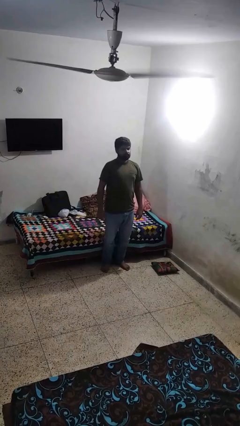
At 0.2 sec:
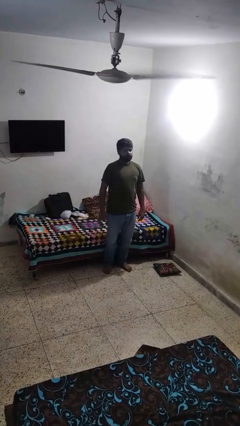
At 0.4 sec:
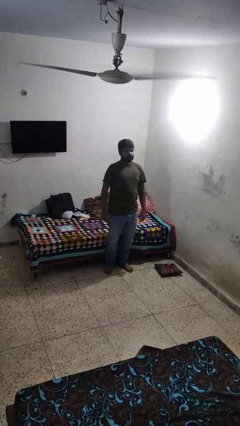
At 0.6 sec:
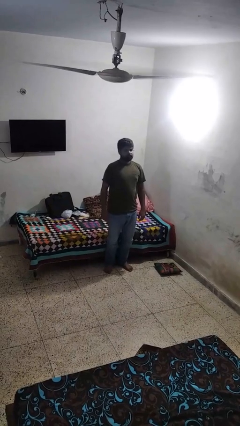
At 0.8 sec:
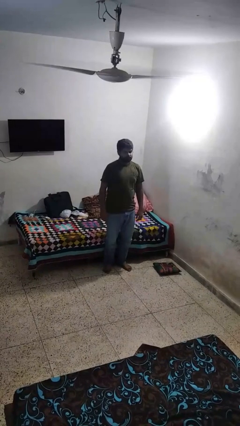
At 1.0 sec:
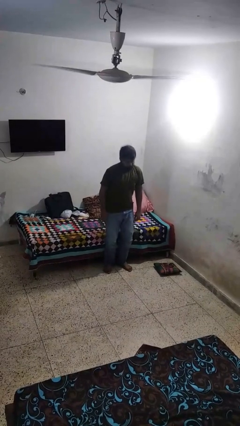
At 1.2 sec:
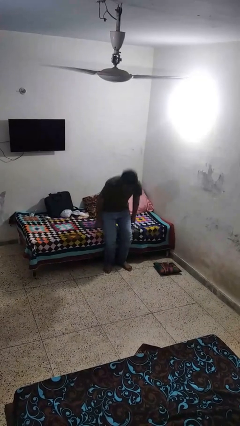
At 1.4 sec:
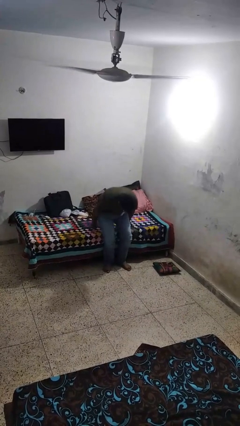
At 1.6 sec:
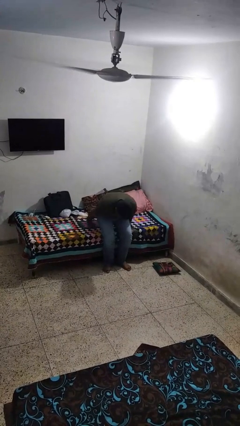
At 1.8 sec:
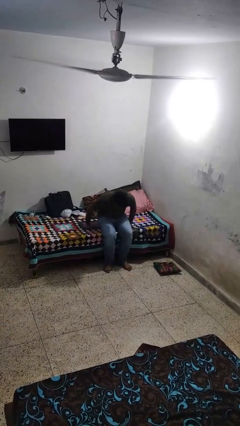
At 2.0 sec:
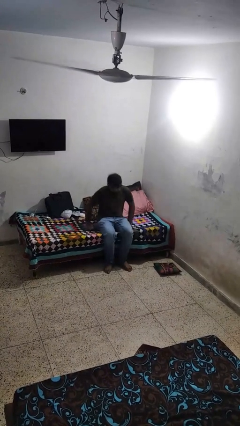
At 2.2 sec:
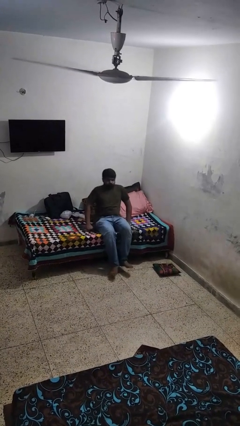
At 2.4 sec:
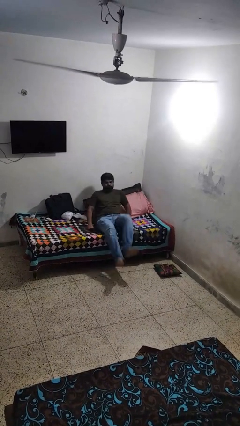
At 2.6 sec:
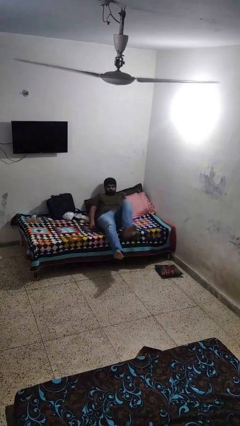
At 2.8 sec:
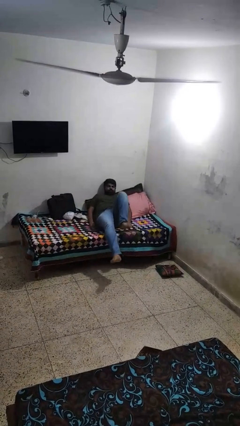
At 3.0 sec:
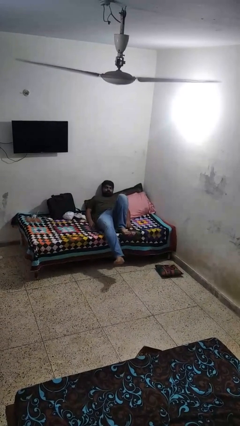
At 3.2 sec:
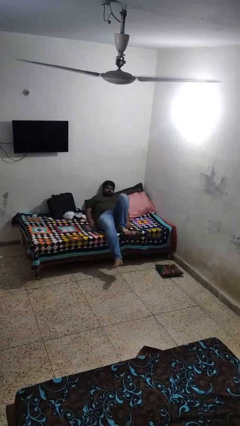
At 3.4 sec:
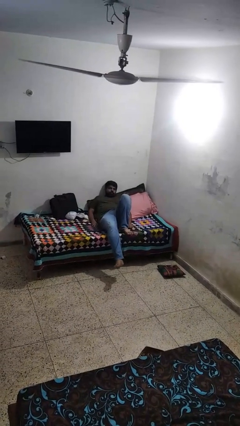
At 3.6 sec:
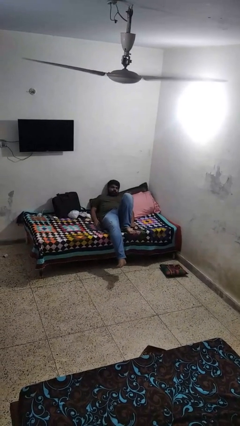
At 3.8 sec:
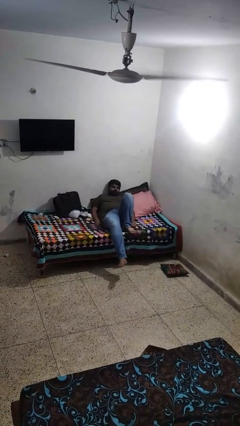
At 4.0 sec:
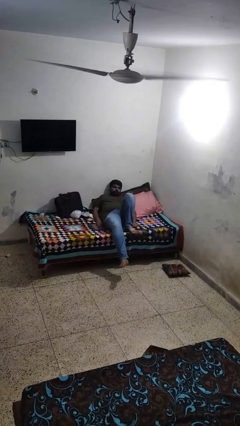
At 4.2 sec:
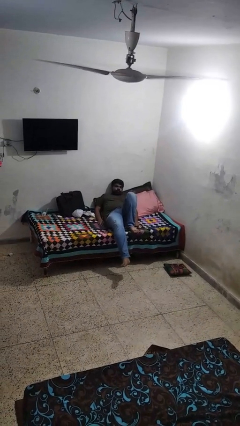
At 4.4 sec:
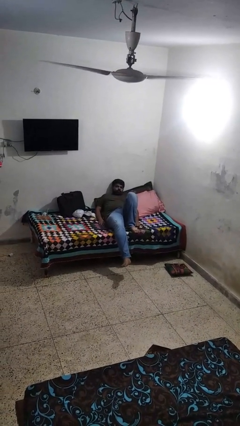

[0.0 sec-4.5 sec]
person lies down on bed

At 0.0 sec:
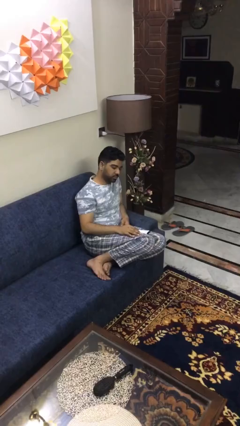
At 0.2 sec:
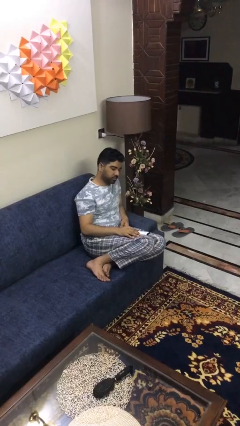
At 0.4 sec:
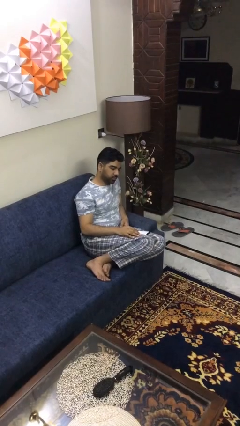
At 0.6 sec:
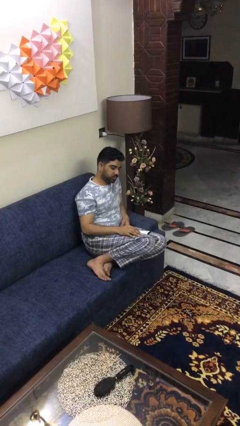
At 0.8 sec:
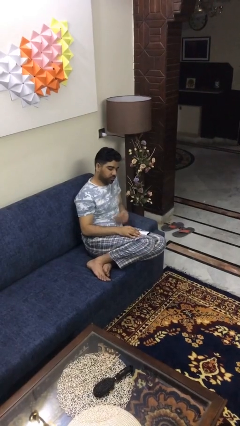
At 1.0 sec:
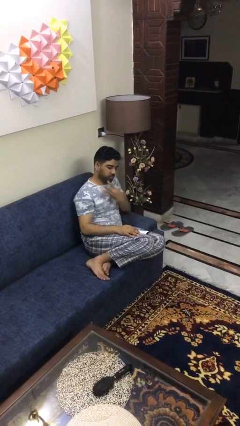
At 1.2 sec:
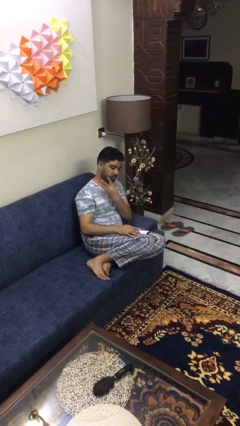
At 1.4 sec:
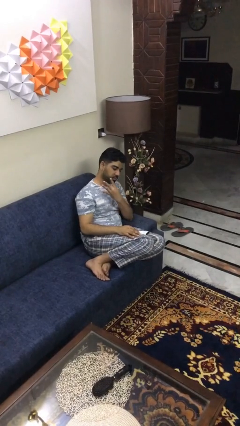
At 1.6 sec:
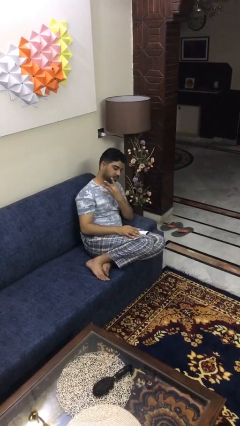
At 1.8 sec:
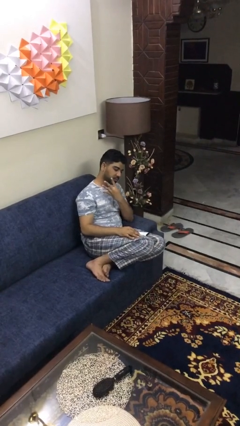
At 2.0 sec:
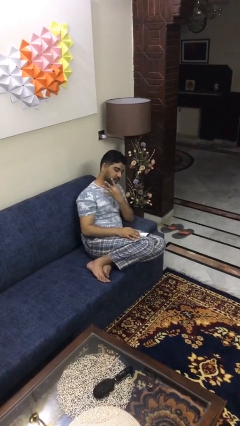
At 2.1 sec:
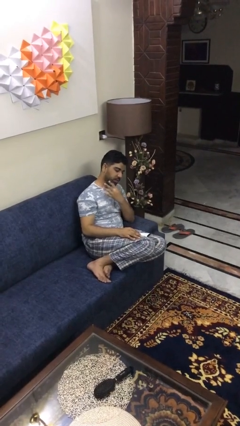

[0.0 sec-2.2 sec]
person gestures number four

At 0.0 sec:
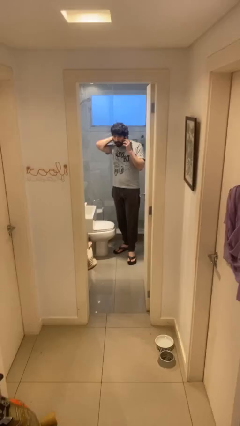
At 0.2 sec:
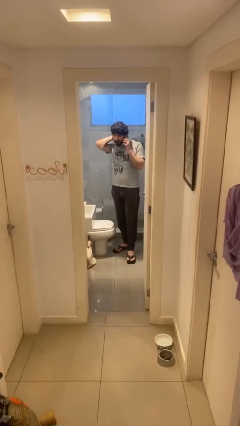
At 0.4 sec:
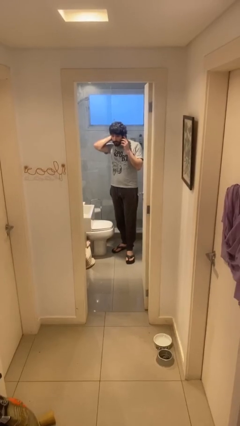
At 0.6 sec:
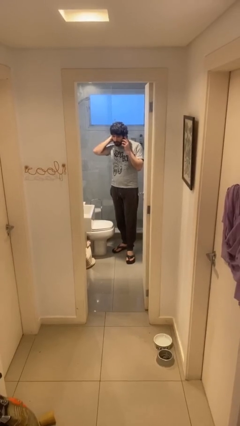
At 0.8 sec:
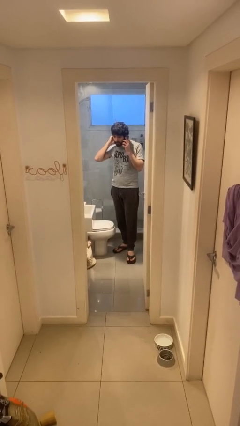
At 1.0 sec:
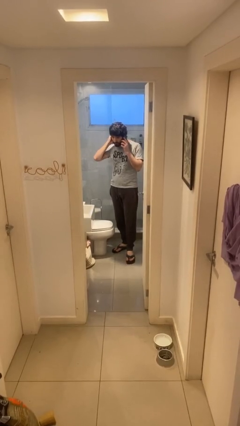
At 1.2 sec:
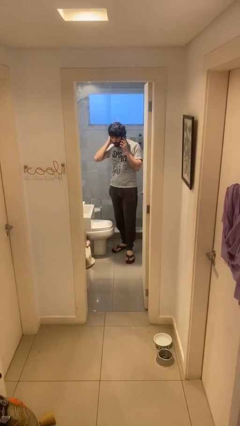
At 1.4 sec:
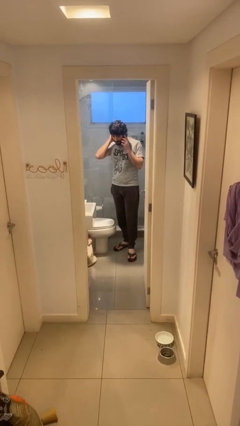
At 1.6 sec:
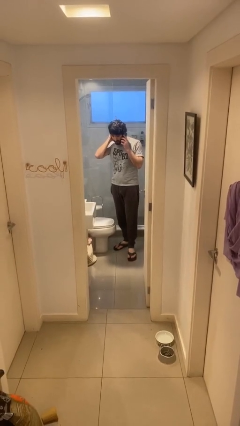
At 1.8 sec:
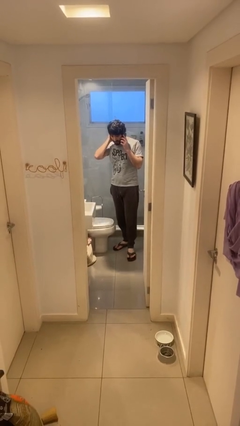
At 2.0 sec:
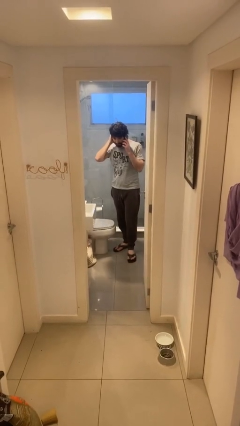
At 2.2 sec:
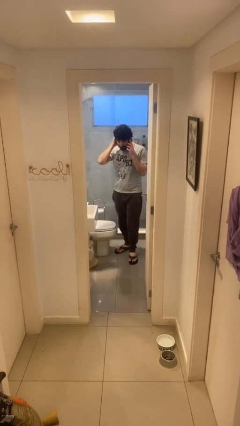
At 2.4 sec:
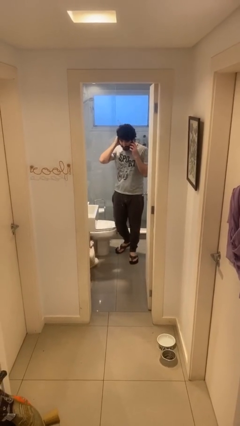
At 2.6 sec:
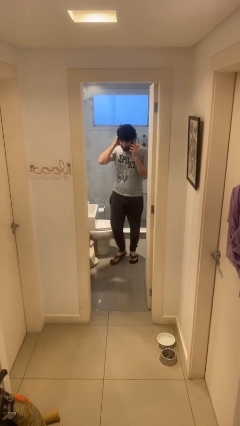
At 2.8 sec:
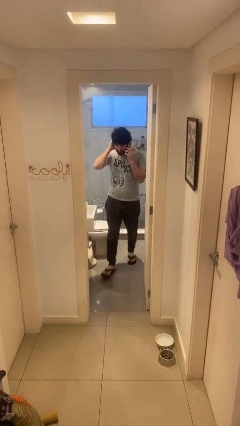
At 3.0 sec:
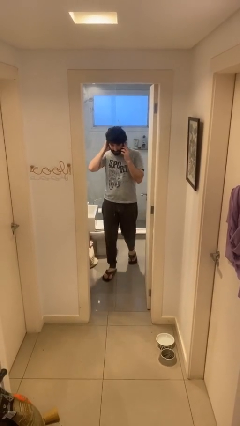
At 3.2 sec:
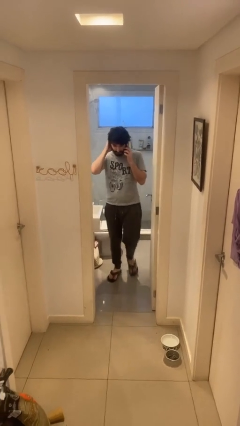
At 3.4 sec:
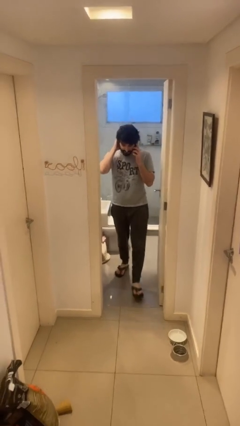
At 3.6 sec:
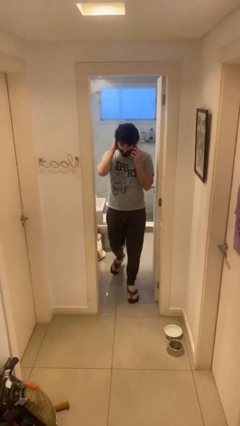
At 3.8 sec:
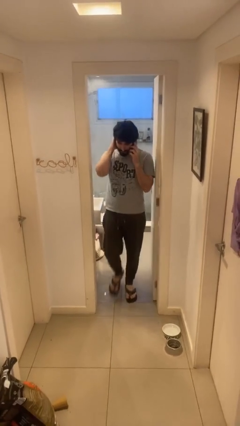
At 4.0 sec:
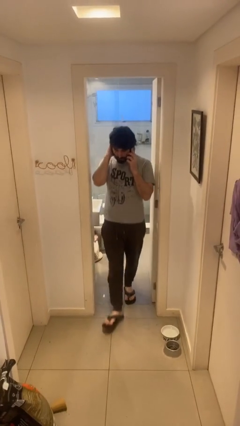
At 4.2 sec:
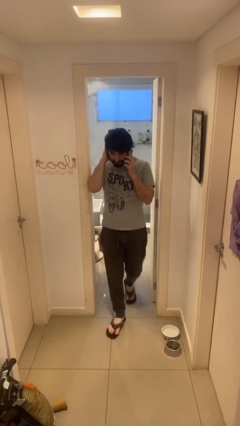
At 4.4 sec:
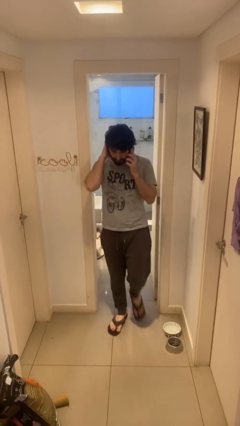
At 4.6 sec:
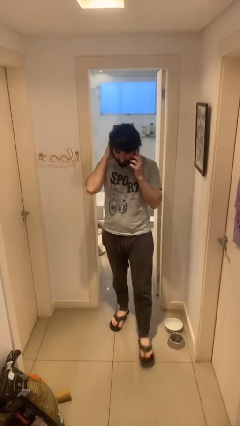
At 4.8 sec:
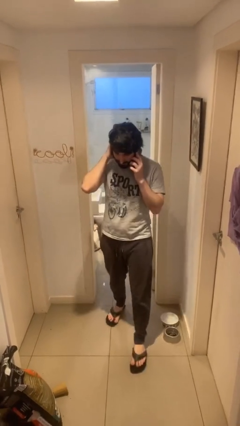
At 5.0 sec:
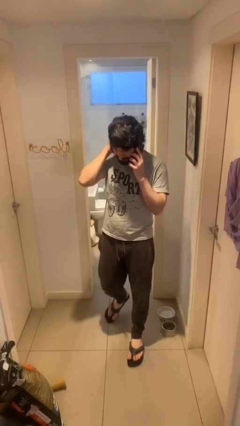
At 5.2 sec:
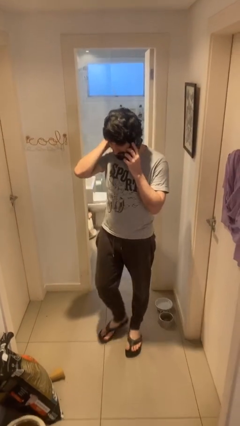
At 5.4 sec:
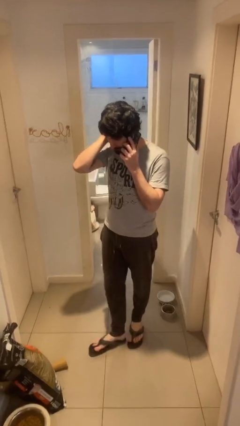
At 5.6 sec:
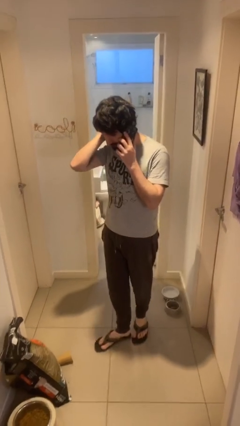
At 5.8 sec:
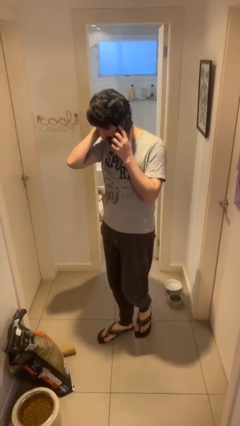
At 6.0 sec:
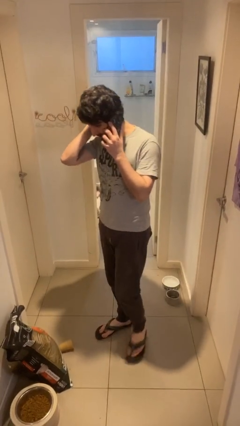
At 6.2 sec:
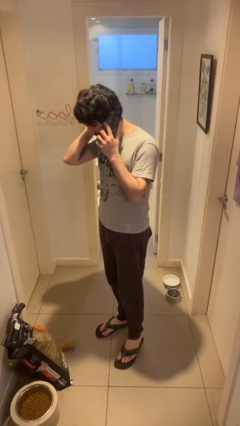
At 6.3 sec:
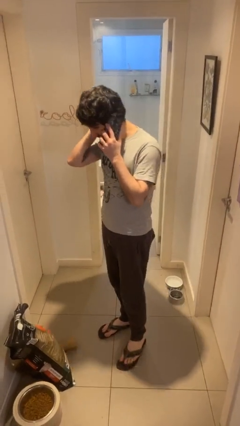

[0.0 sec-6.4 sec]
person enters scene through structure

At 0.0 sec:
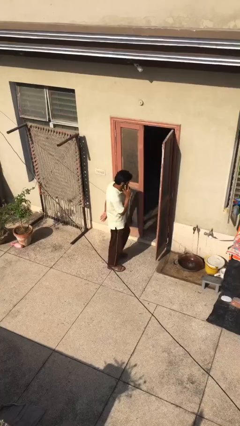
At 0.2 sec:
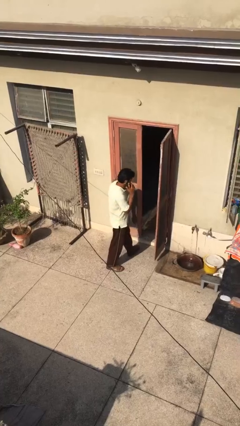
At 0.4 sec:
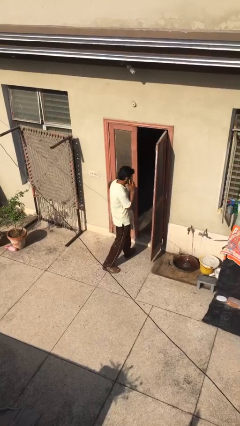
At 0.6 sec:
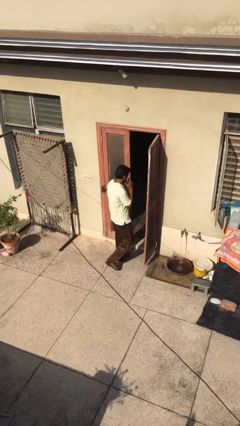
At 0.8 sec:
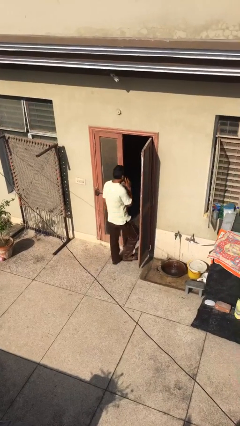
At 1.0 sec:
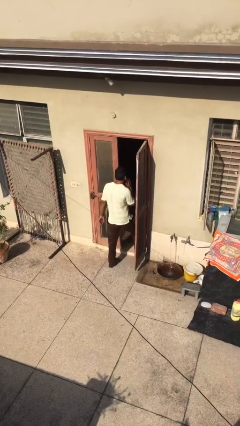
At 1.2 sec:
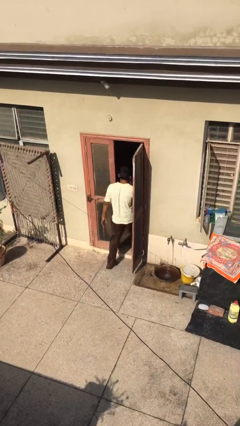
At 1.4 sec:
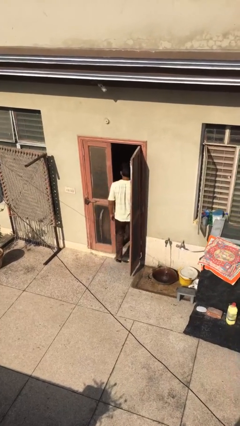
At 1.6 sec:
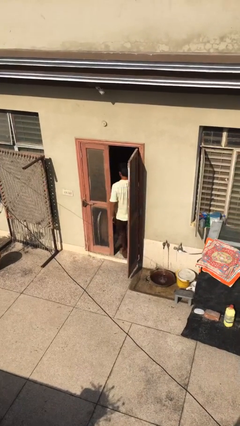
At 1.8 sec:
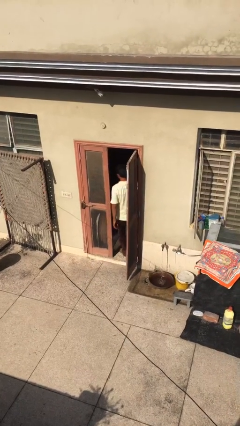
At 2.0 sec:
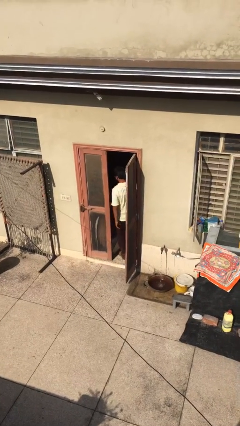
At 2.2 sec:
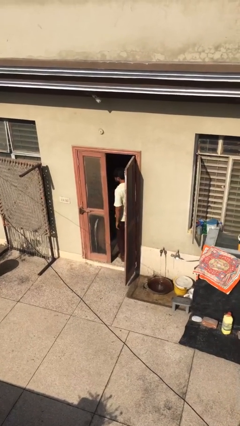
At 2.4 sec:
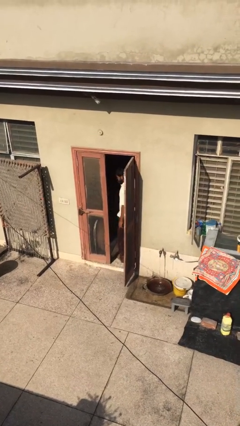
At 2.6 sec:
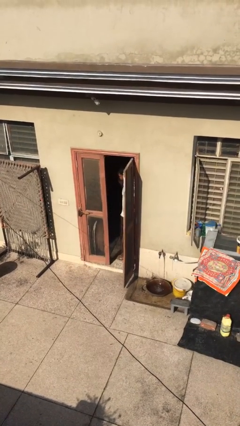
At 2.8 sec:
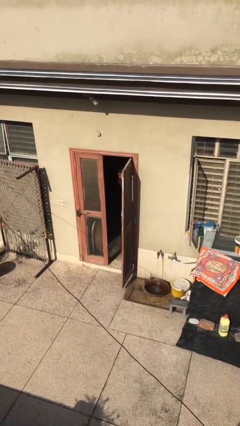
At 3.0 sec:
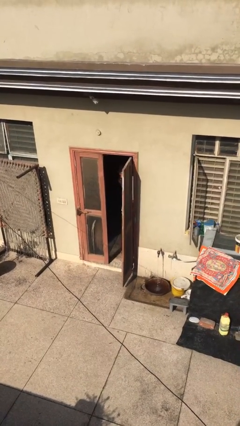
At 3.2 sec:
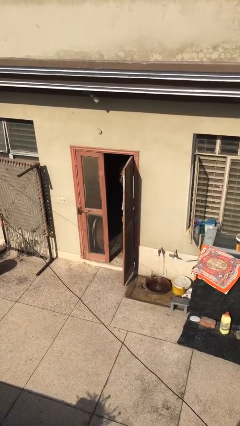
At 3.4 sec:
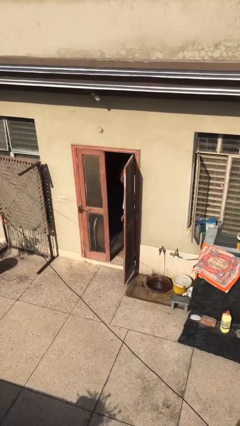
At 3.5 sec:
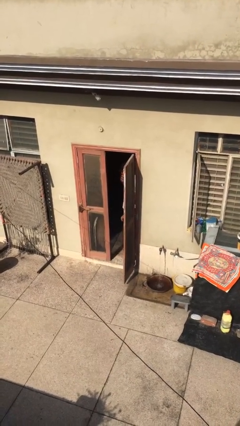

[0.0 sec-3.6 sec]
person exits scene through structure

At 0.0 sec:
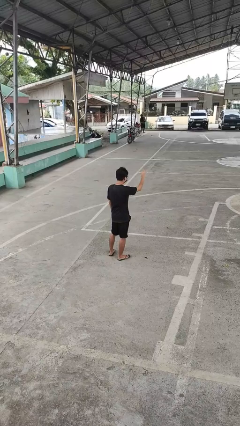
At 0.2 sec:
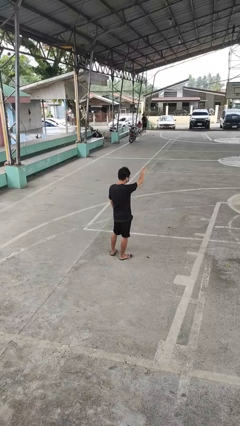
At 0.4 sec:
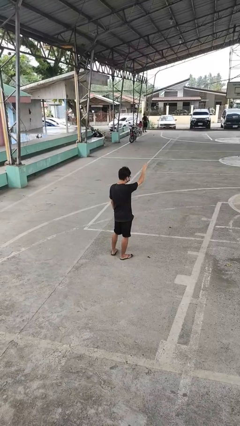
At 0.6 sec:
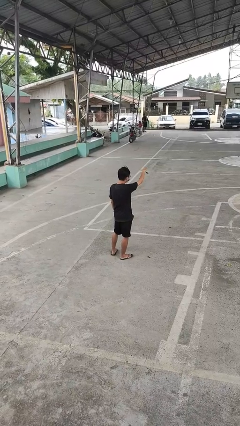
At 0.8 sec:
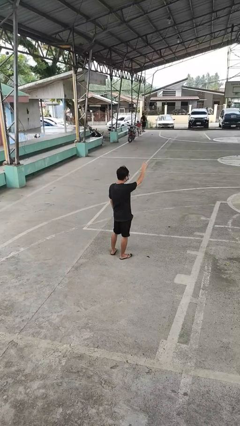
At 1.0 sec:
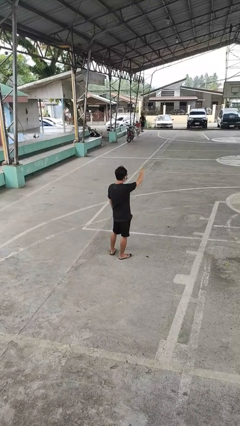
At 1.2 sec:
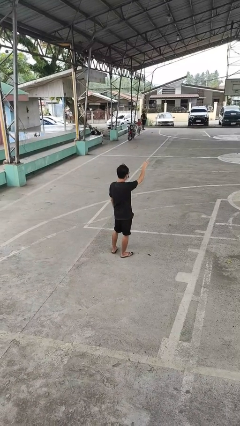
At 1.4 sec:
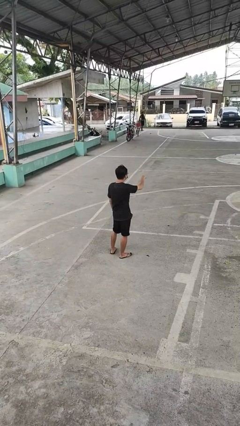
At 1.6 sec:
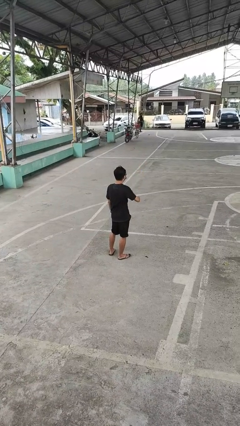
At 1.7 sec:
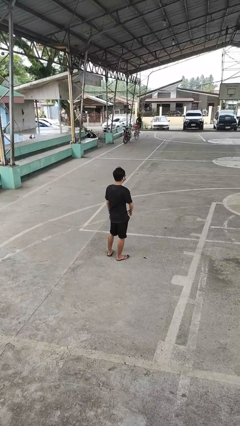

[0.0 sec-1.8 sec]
person gestures come here
